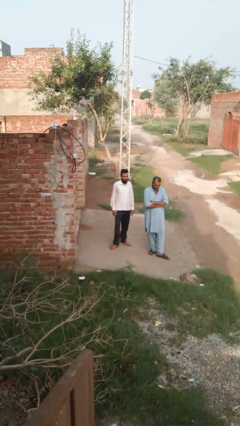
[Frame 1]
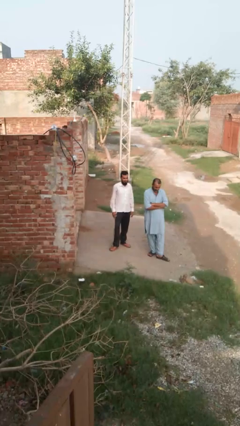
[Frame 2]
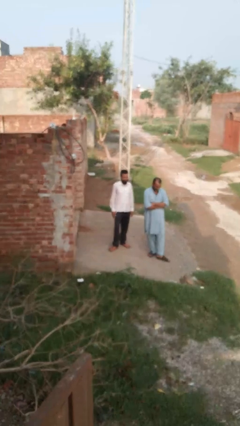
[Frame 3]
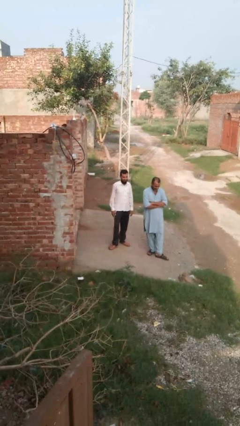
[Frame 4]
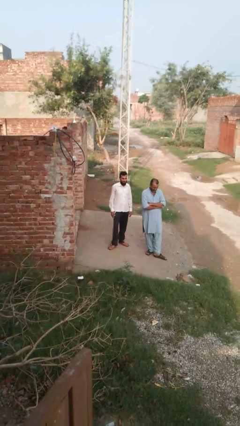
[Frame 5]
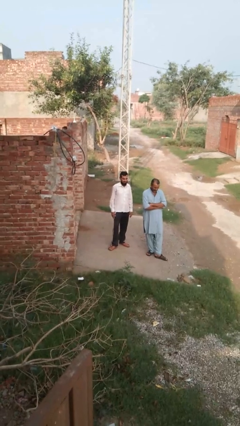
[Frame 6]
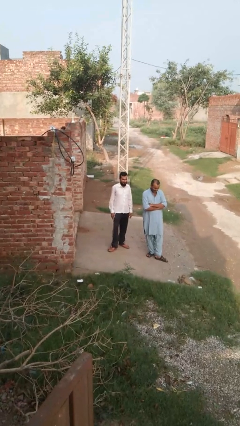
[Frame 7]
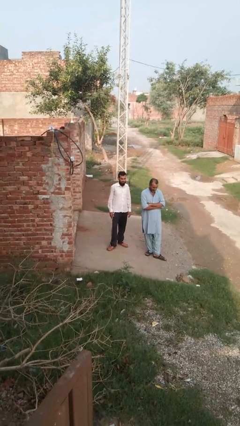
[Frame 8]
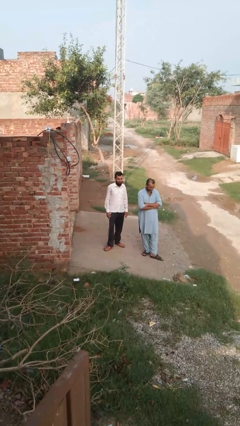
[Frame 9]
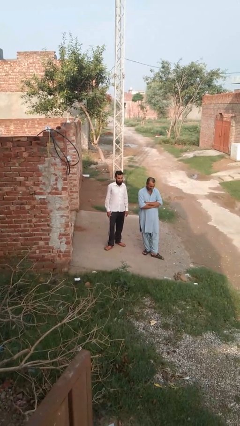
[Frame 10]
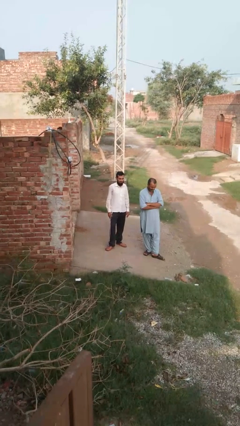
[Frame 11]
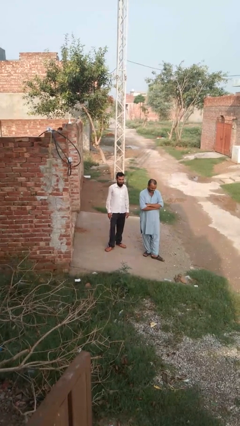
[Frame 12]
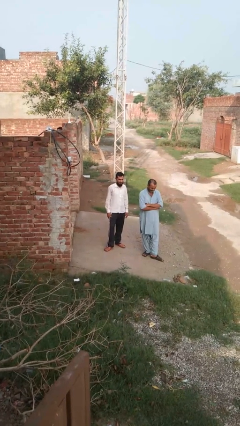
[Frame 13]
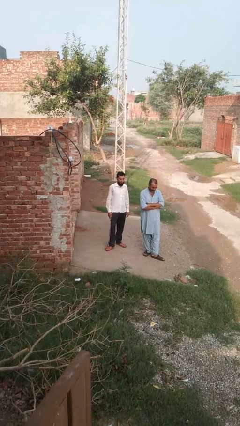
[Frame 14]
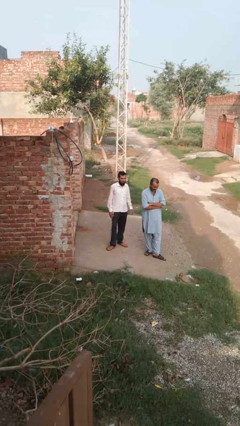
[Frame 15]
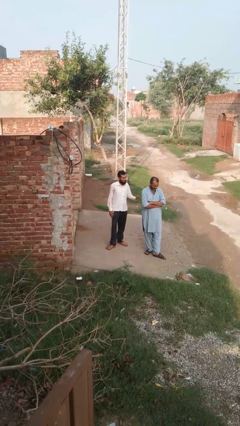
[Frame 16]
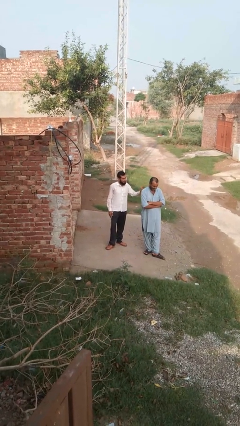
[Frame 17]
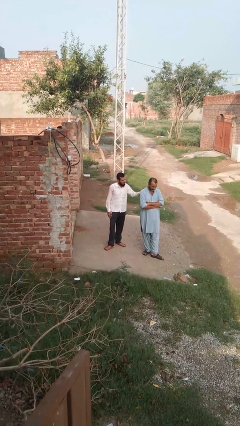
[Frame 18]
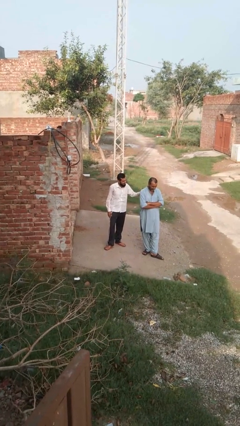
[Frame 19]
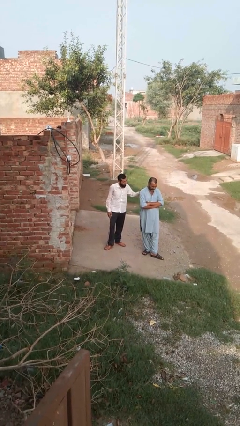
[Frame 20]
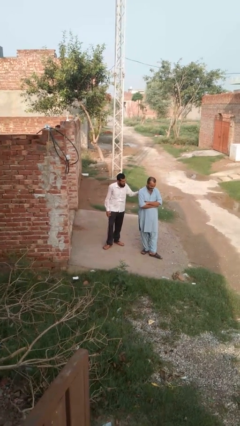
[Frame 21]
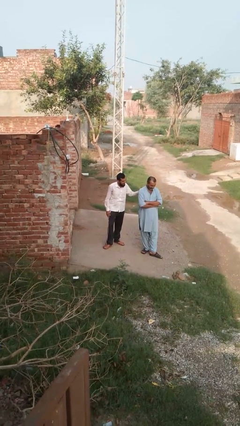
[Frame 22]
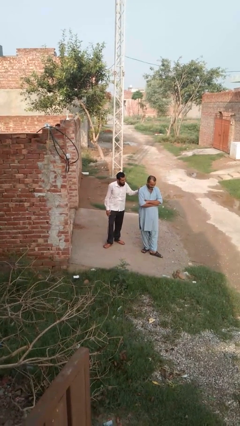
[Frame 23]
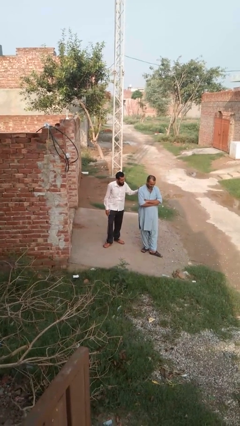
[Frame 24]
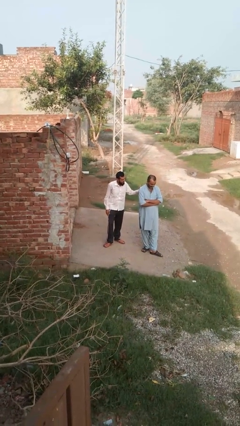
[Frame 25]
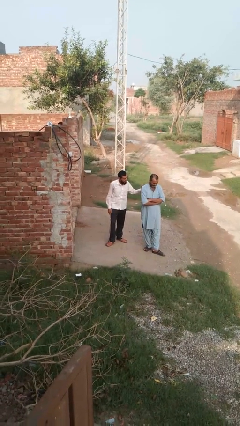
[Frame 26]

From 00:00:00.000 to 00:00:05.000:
person pounds shoulders of person

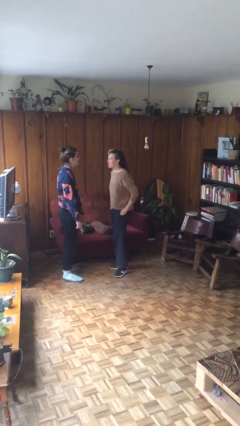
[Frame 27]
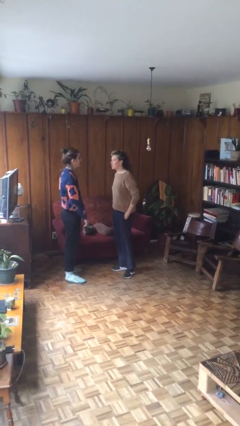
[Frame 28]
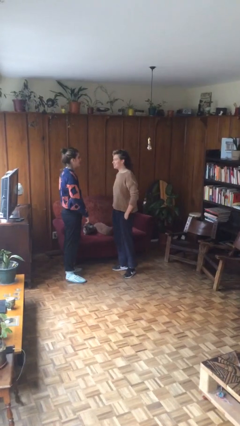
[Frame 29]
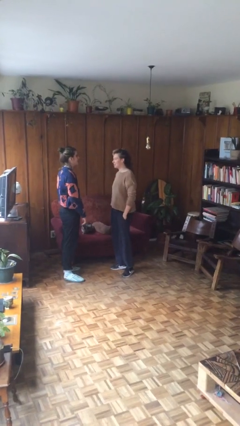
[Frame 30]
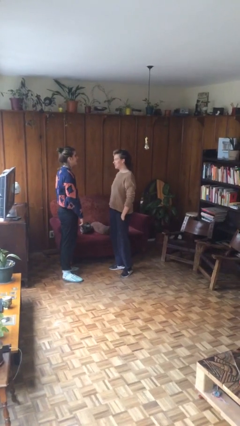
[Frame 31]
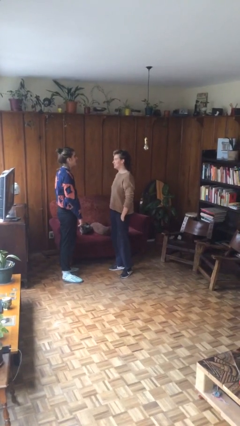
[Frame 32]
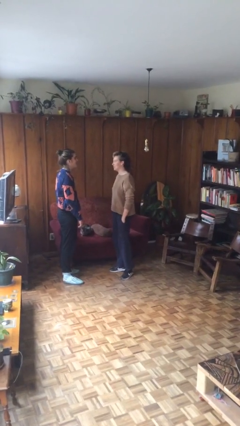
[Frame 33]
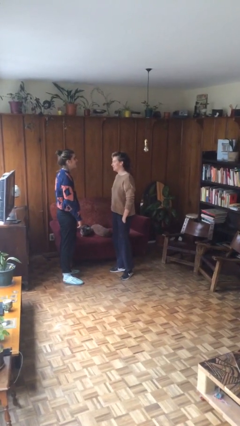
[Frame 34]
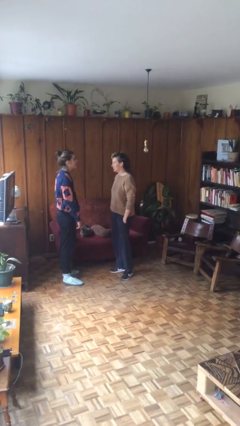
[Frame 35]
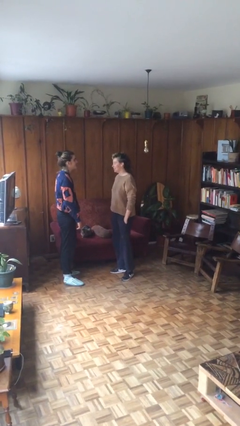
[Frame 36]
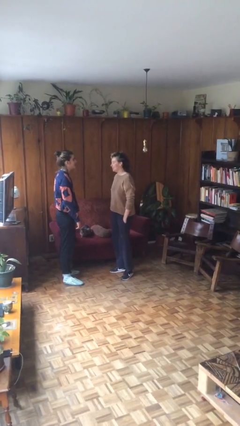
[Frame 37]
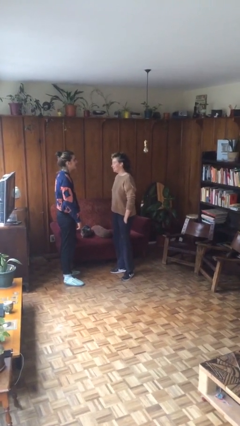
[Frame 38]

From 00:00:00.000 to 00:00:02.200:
person talks to person

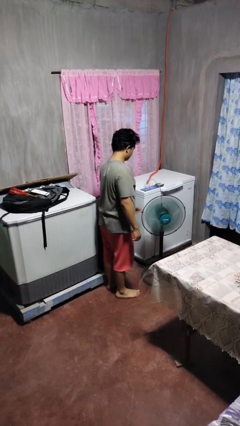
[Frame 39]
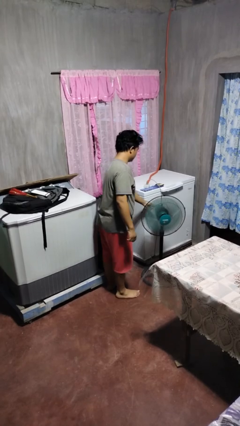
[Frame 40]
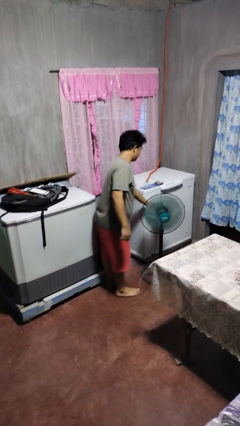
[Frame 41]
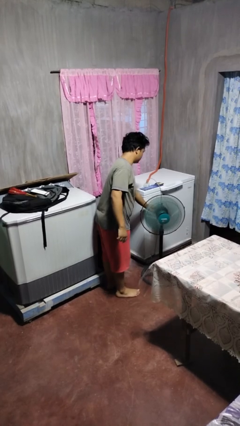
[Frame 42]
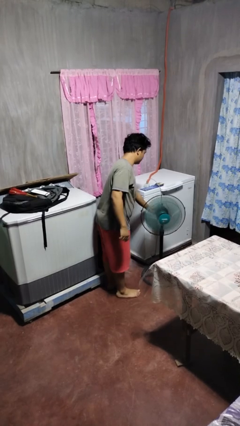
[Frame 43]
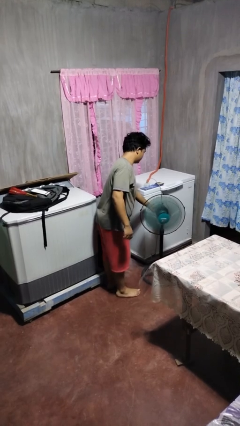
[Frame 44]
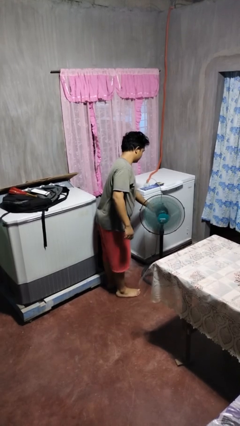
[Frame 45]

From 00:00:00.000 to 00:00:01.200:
person turns off fan

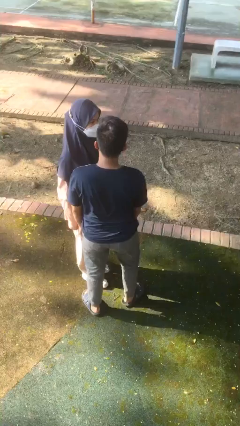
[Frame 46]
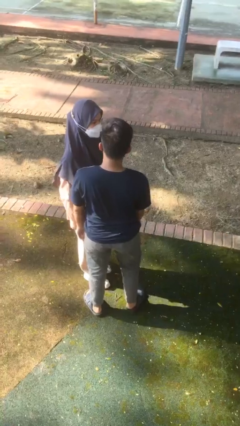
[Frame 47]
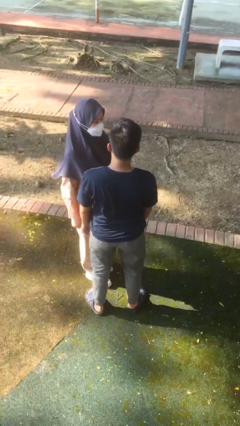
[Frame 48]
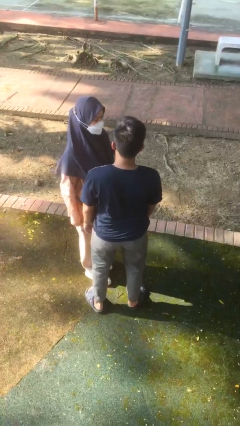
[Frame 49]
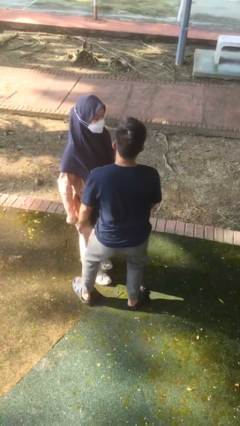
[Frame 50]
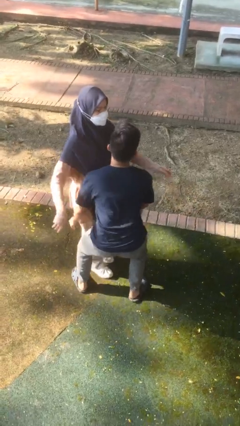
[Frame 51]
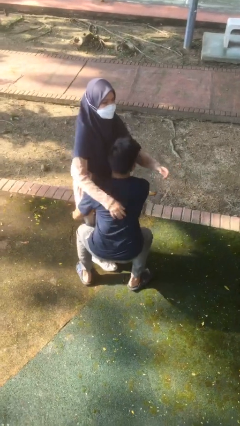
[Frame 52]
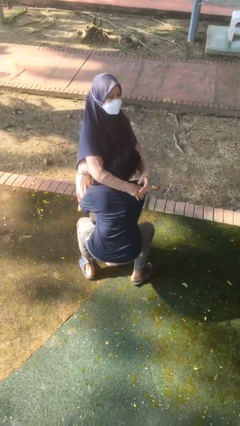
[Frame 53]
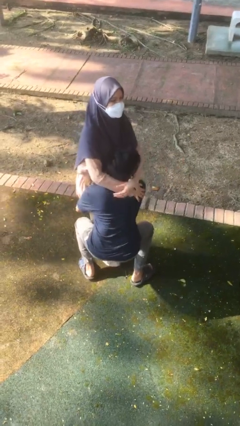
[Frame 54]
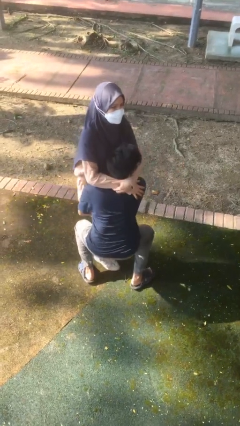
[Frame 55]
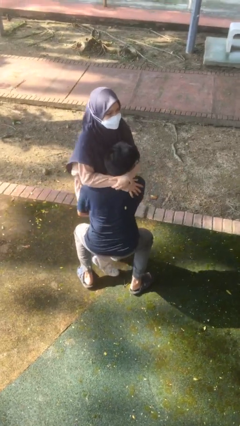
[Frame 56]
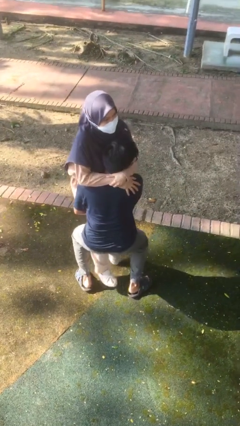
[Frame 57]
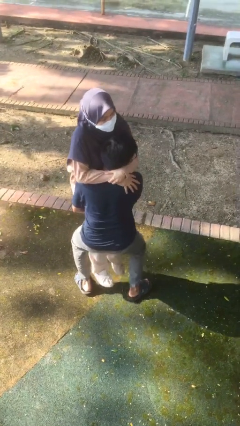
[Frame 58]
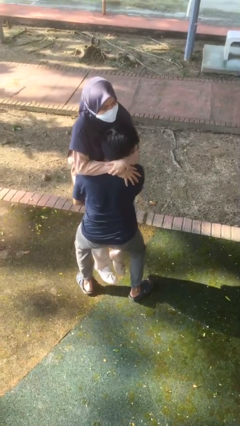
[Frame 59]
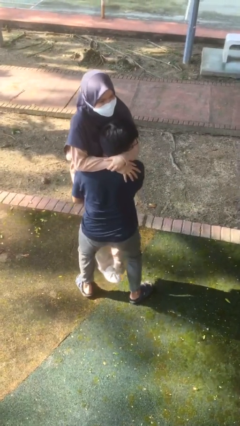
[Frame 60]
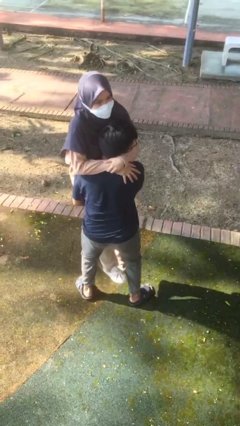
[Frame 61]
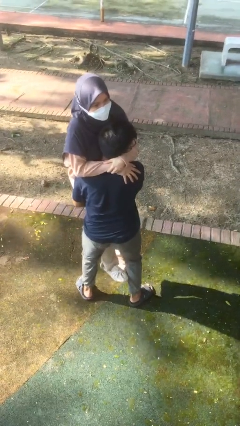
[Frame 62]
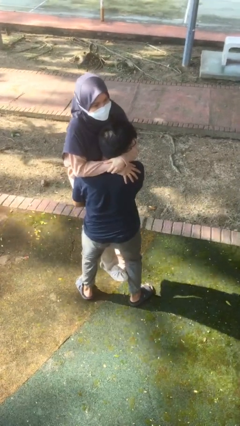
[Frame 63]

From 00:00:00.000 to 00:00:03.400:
person picks up person

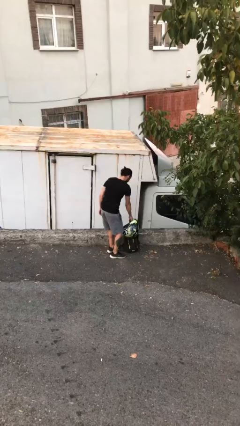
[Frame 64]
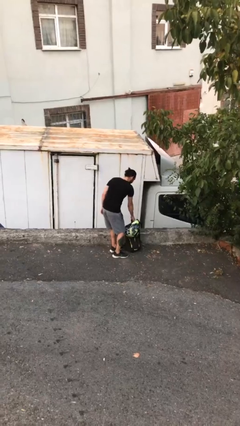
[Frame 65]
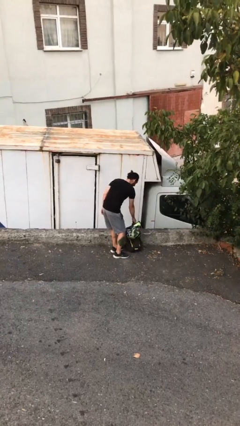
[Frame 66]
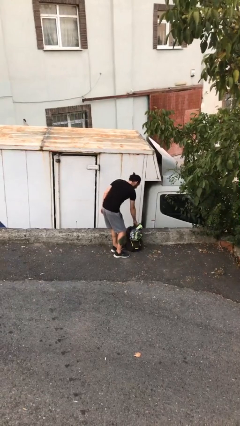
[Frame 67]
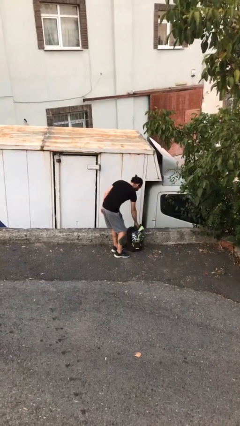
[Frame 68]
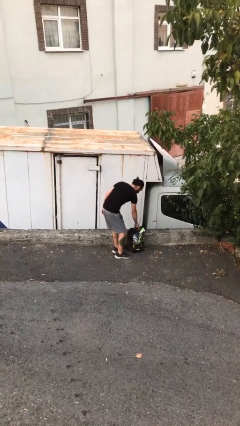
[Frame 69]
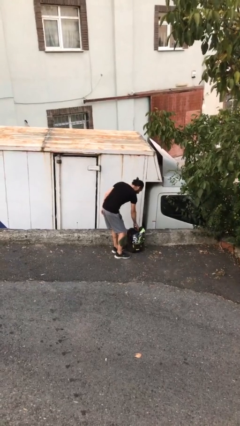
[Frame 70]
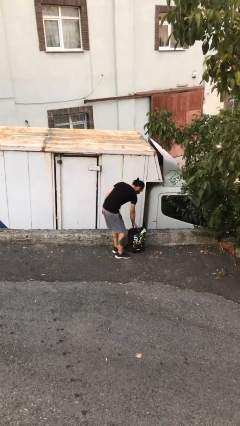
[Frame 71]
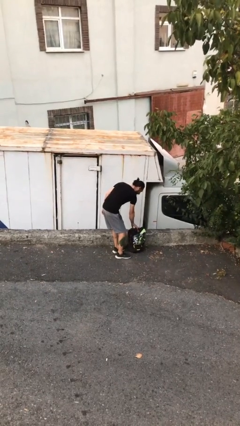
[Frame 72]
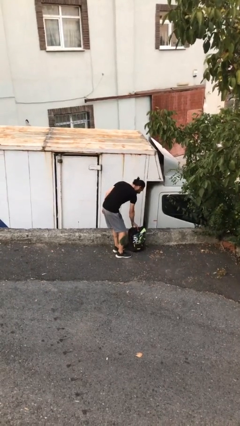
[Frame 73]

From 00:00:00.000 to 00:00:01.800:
person puts down object on floor

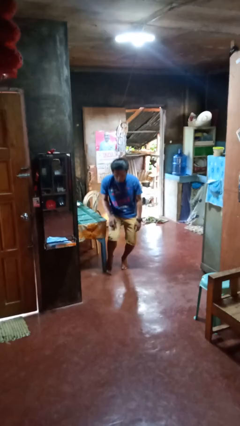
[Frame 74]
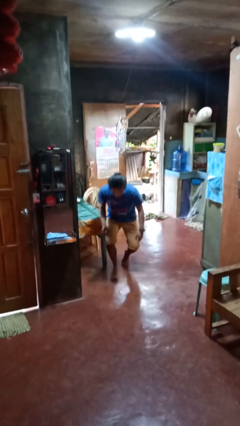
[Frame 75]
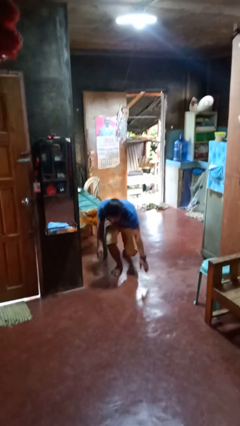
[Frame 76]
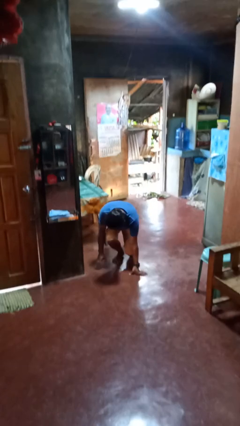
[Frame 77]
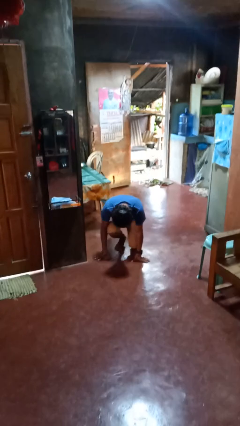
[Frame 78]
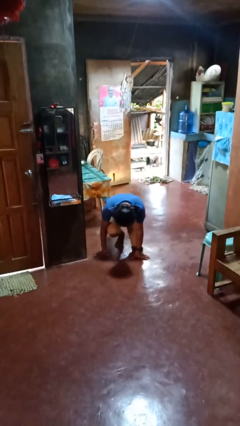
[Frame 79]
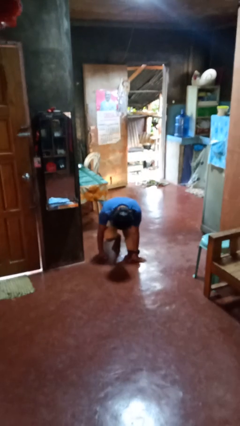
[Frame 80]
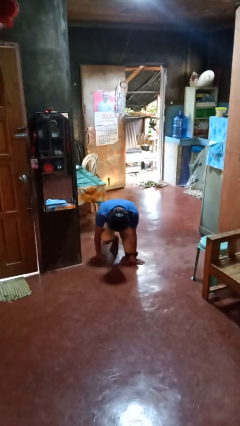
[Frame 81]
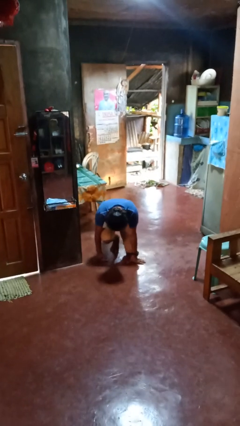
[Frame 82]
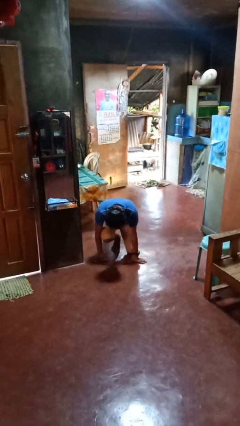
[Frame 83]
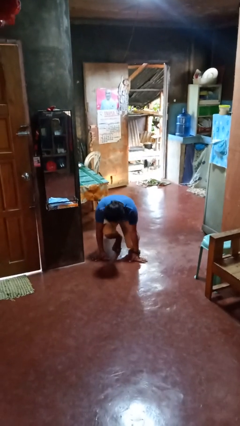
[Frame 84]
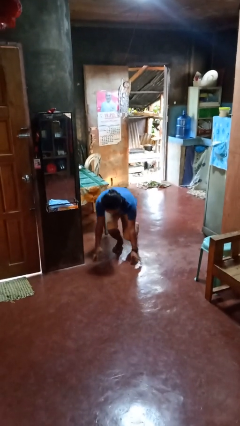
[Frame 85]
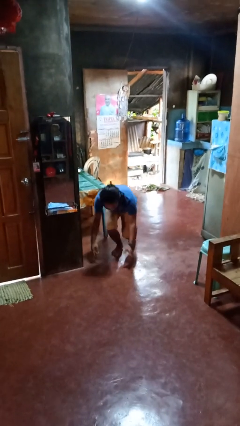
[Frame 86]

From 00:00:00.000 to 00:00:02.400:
person trips on object on floor

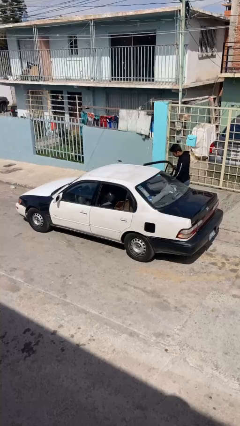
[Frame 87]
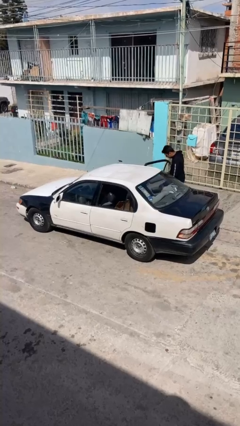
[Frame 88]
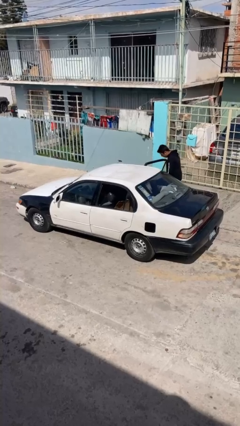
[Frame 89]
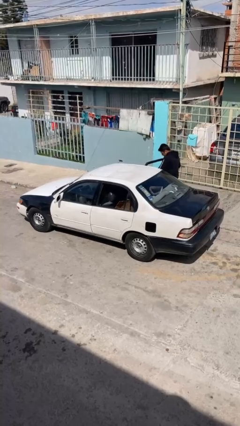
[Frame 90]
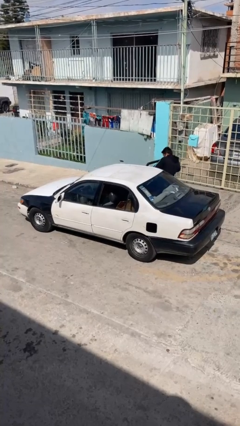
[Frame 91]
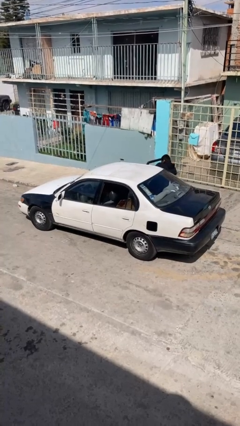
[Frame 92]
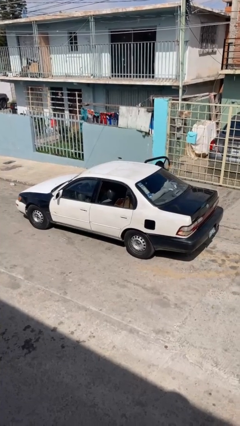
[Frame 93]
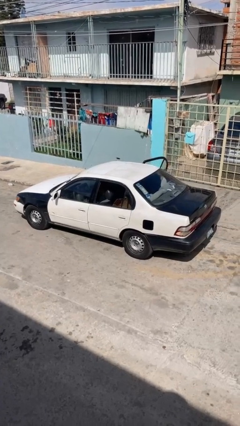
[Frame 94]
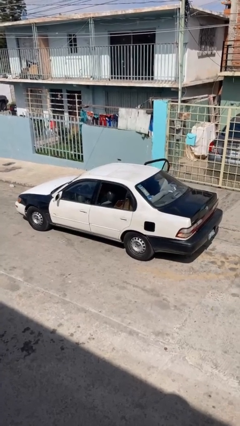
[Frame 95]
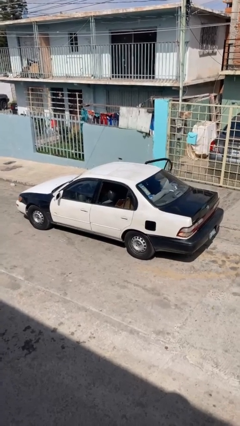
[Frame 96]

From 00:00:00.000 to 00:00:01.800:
car picks up person
